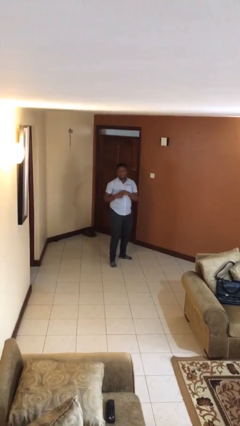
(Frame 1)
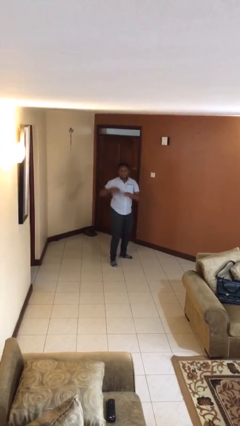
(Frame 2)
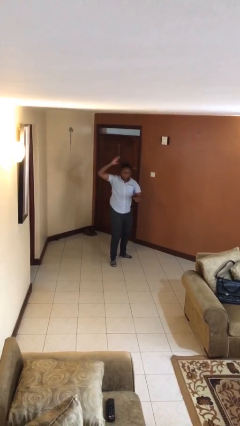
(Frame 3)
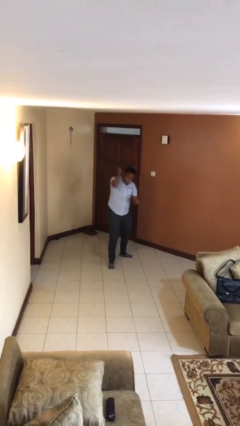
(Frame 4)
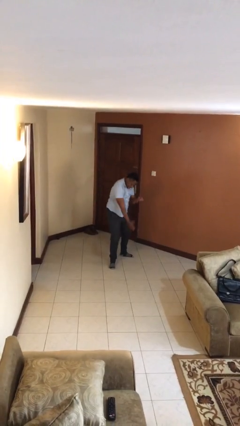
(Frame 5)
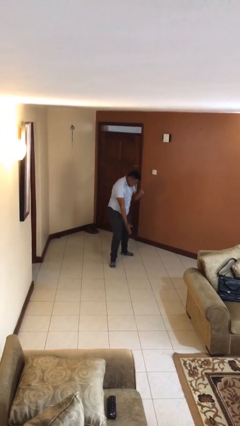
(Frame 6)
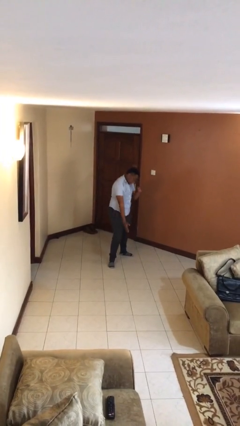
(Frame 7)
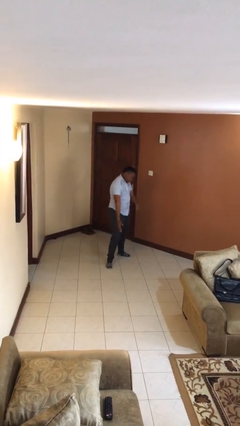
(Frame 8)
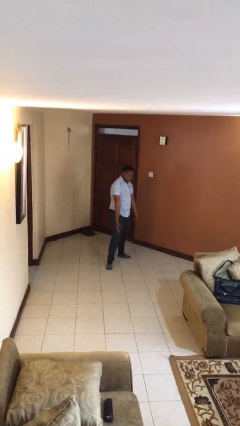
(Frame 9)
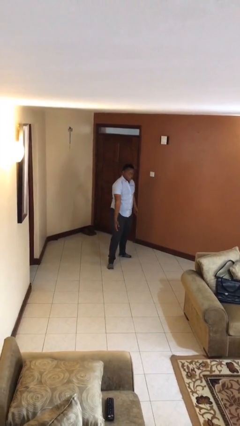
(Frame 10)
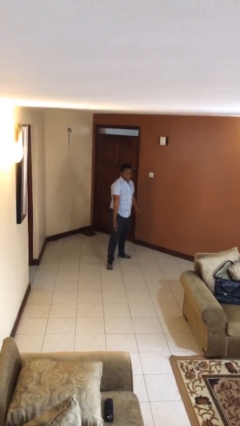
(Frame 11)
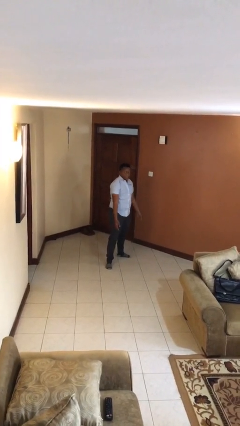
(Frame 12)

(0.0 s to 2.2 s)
person karate chop

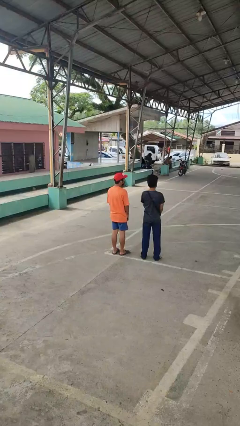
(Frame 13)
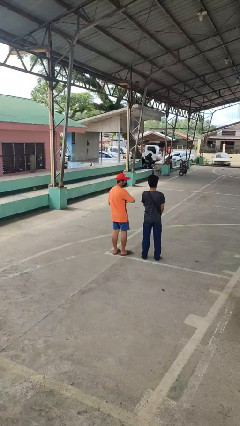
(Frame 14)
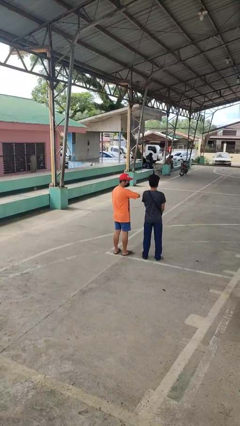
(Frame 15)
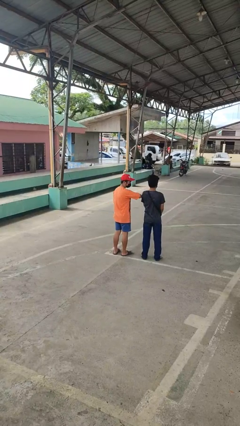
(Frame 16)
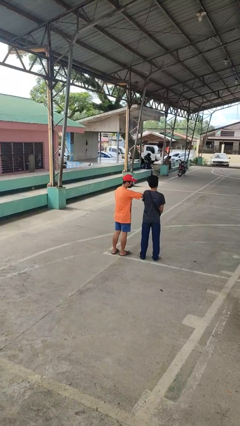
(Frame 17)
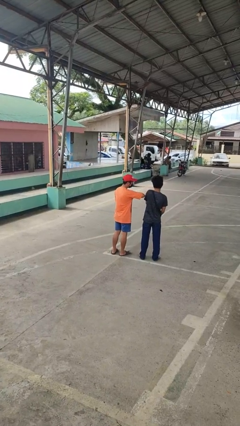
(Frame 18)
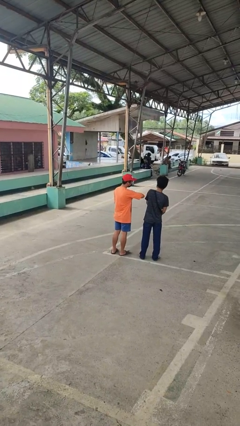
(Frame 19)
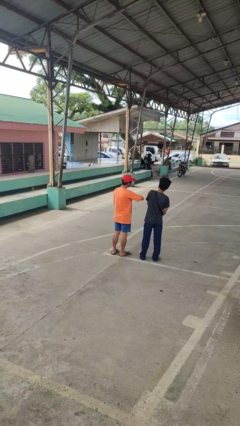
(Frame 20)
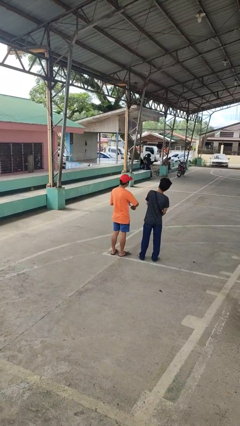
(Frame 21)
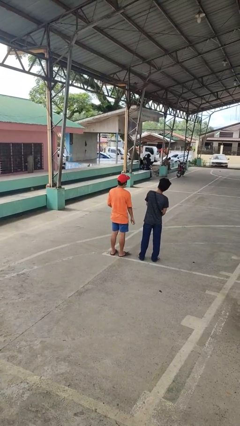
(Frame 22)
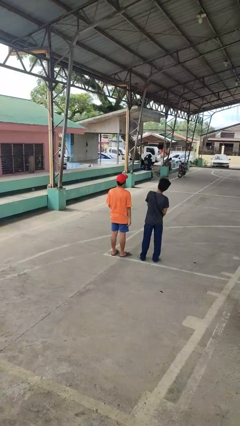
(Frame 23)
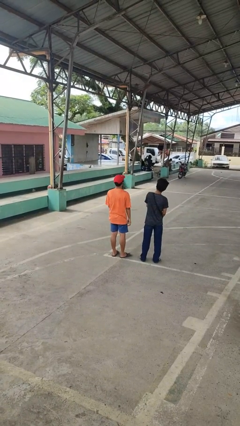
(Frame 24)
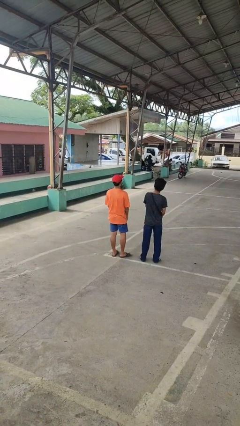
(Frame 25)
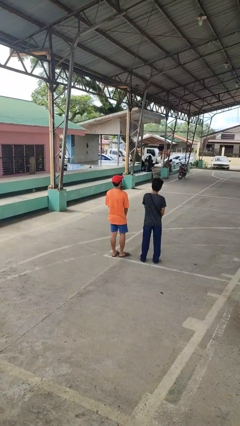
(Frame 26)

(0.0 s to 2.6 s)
person nudges person with elbow

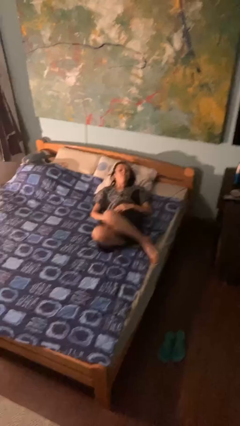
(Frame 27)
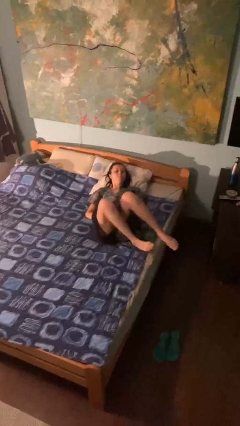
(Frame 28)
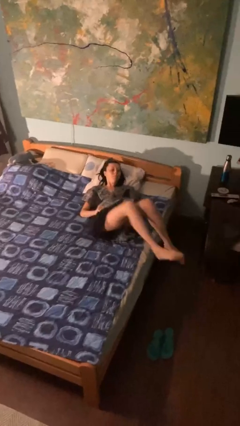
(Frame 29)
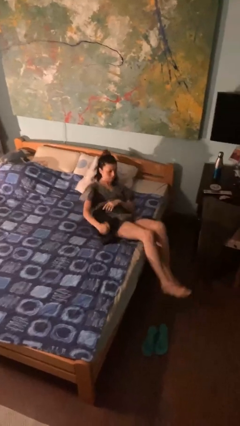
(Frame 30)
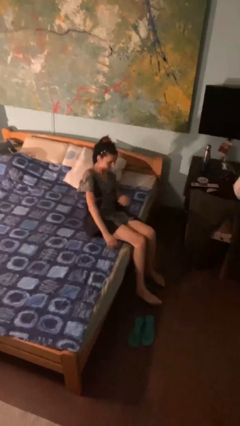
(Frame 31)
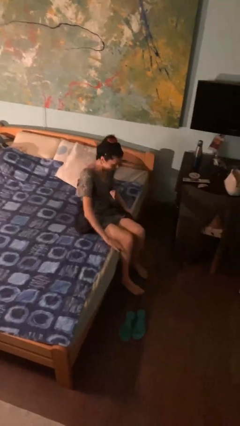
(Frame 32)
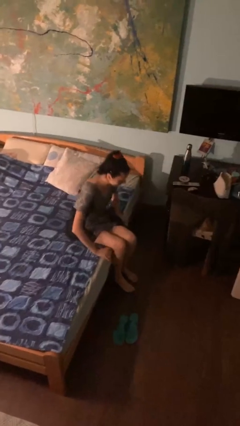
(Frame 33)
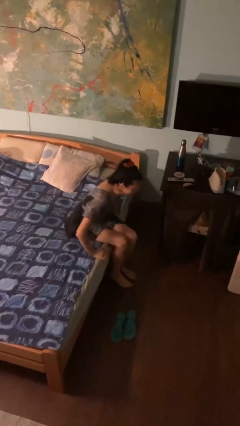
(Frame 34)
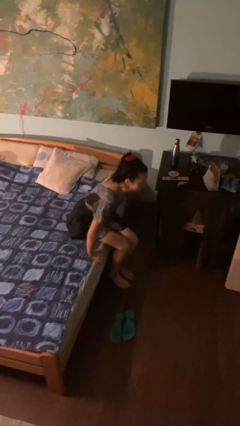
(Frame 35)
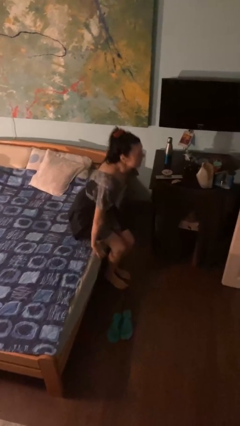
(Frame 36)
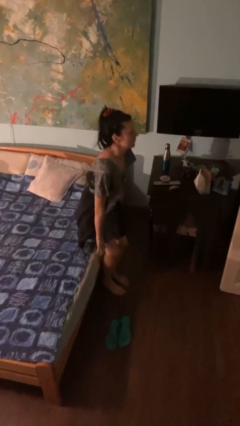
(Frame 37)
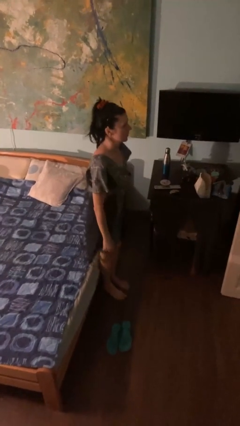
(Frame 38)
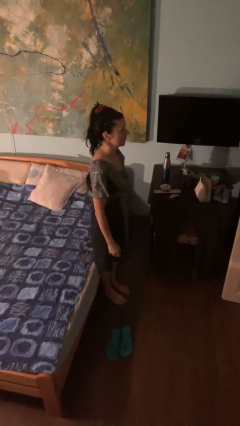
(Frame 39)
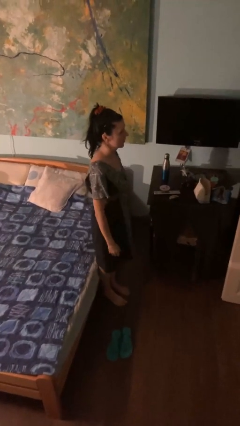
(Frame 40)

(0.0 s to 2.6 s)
person stands up

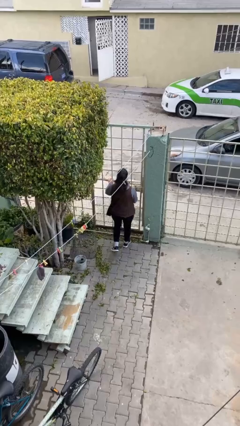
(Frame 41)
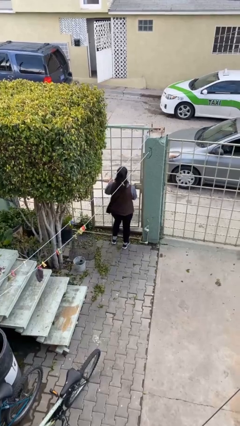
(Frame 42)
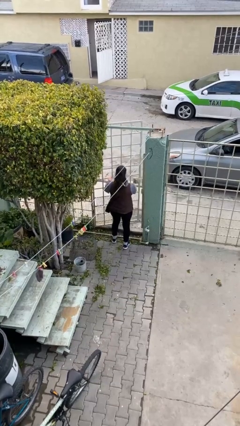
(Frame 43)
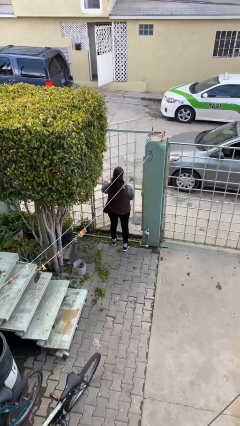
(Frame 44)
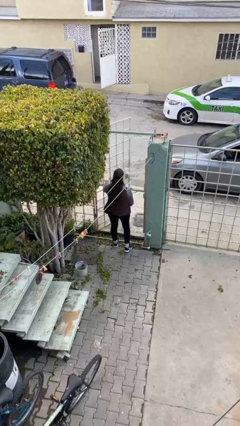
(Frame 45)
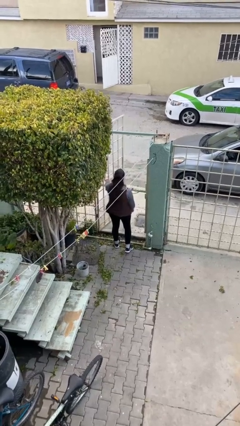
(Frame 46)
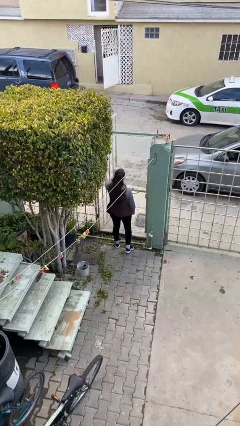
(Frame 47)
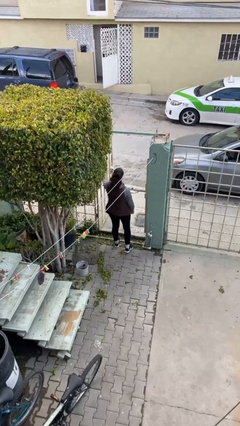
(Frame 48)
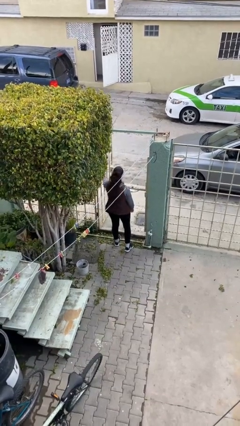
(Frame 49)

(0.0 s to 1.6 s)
person opens facility door

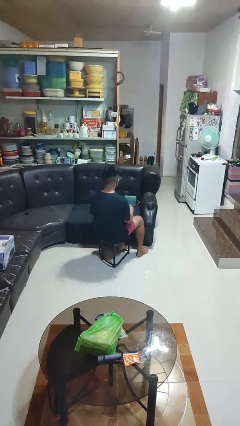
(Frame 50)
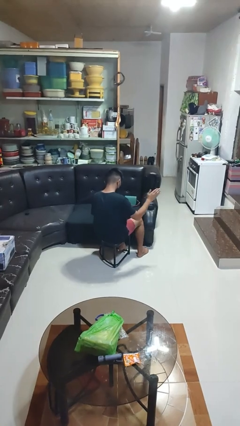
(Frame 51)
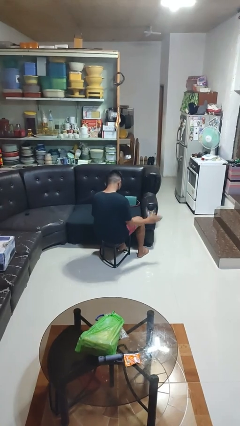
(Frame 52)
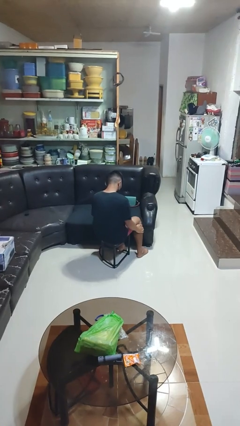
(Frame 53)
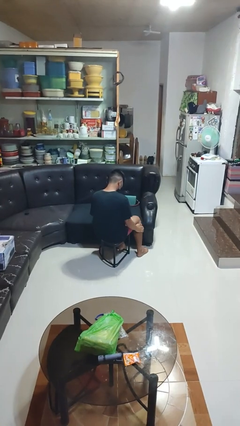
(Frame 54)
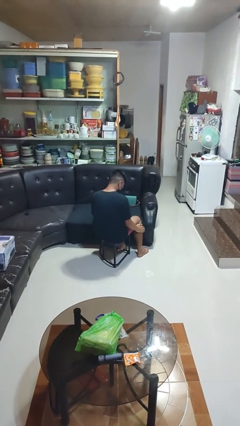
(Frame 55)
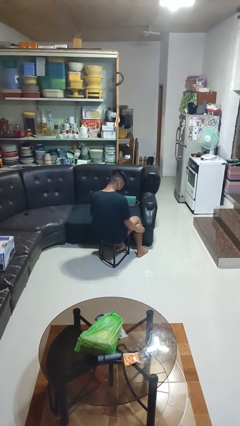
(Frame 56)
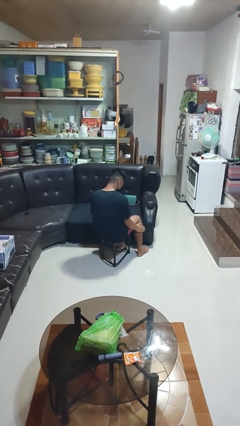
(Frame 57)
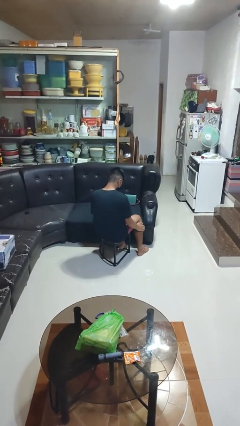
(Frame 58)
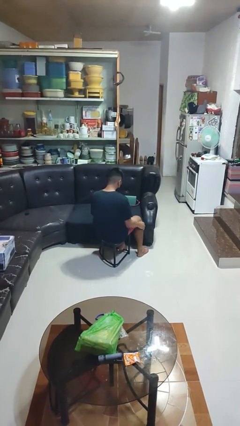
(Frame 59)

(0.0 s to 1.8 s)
person swats bug

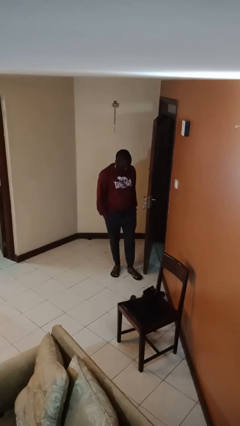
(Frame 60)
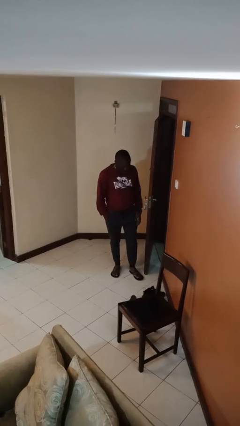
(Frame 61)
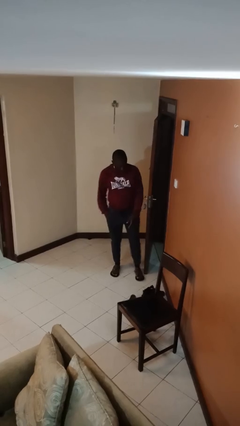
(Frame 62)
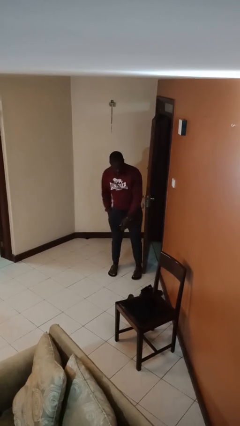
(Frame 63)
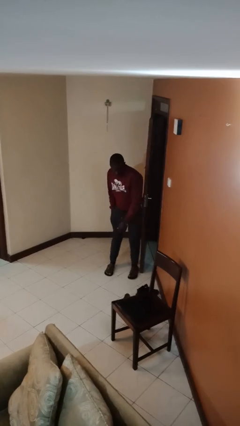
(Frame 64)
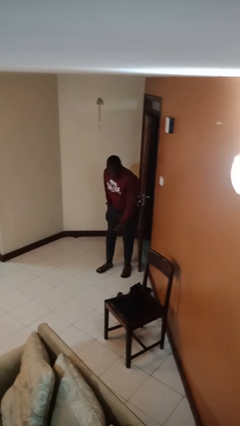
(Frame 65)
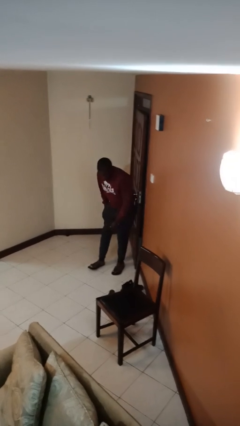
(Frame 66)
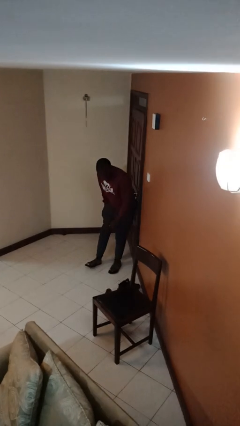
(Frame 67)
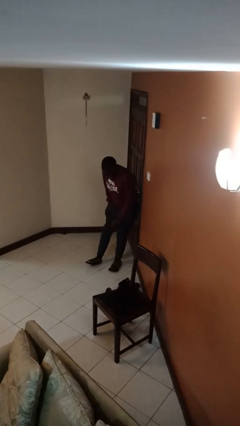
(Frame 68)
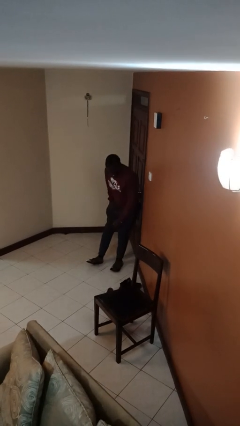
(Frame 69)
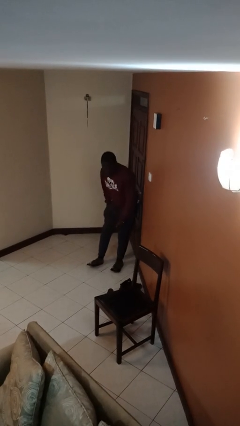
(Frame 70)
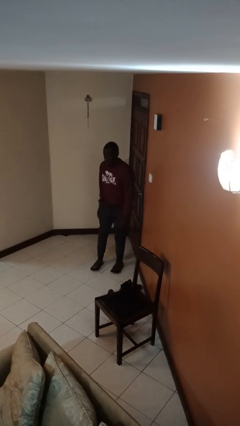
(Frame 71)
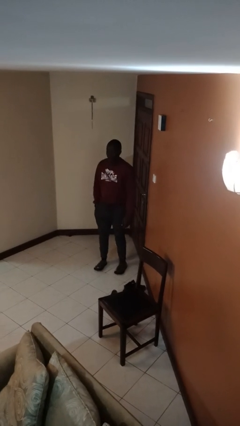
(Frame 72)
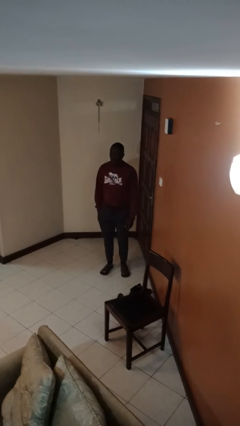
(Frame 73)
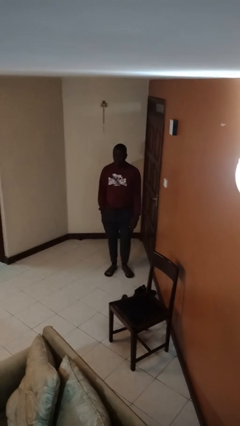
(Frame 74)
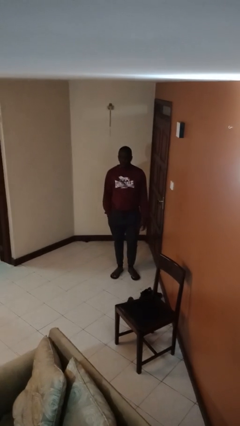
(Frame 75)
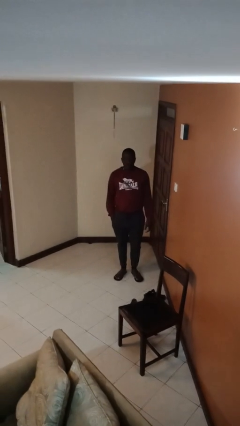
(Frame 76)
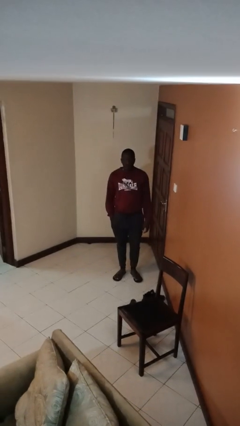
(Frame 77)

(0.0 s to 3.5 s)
person closes door with hip

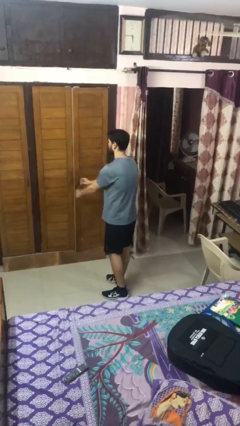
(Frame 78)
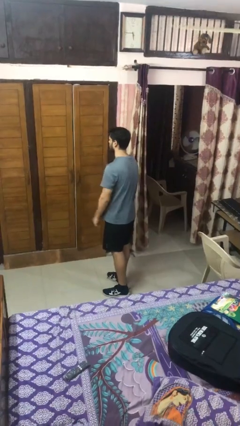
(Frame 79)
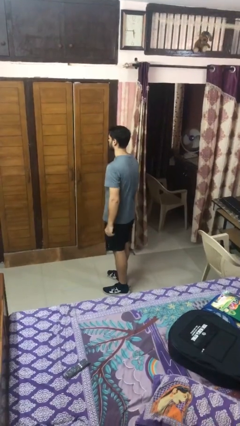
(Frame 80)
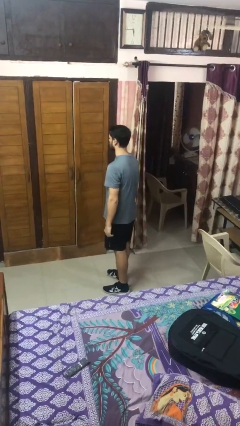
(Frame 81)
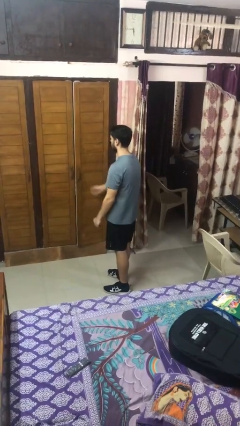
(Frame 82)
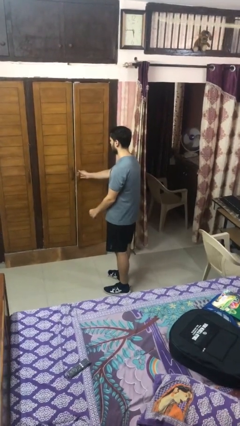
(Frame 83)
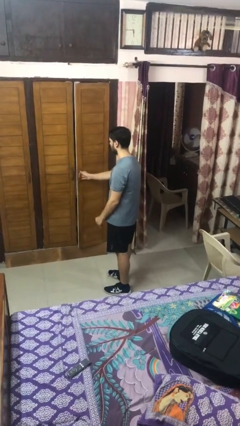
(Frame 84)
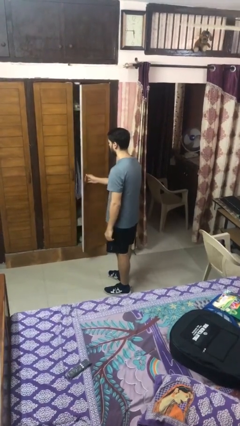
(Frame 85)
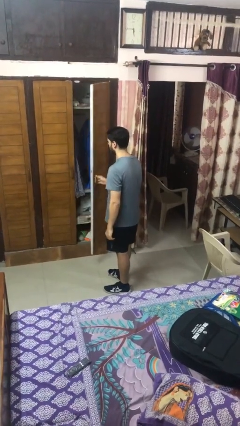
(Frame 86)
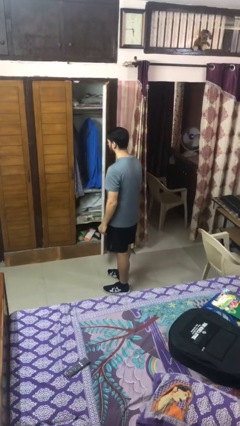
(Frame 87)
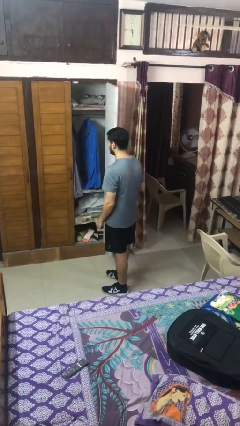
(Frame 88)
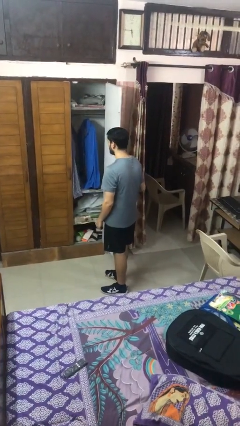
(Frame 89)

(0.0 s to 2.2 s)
person opens closet door

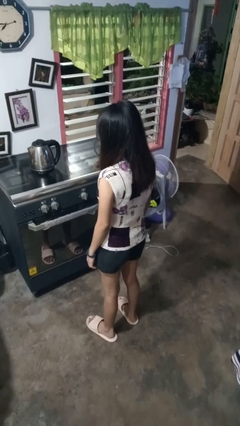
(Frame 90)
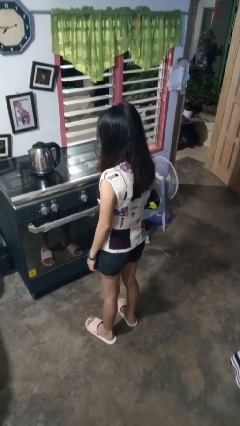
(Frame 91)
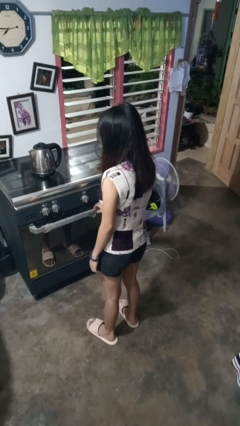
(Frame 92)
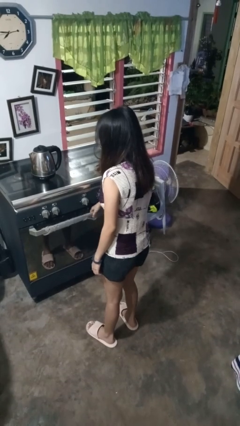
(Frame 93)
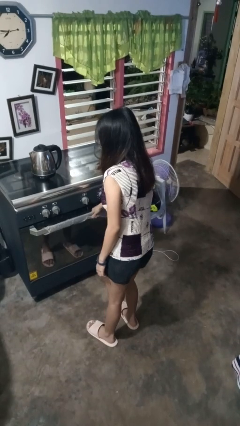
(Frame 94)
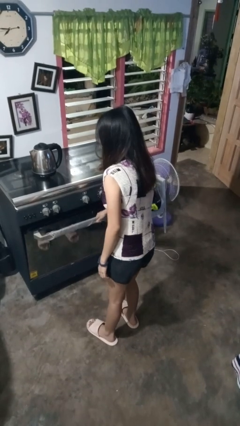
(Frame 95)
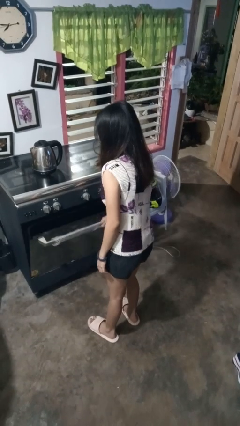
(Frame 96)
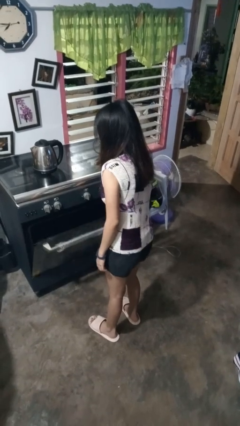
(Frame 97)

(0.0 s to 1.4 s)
person opens oven door
